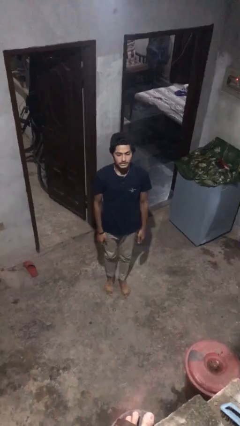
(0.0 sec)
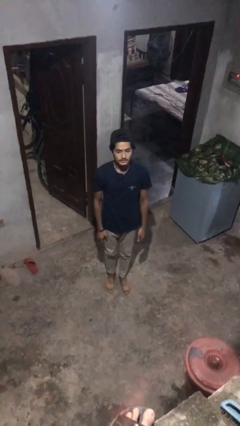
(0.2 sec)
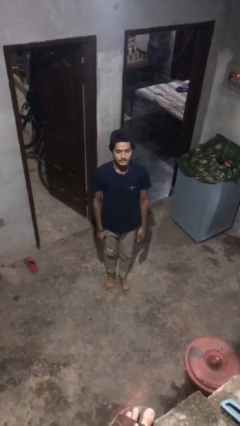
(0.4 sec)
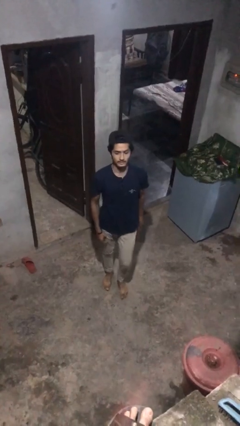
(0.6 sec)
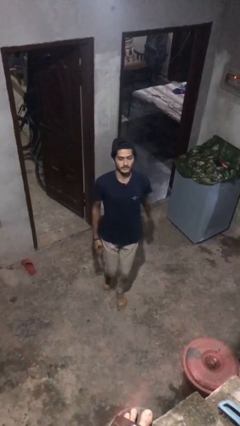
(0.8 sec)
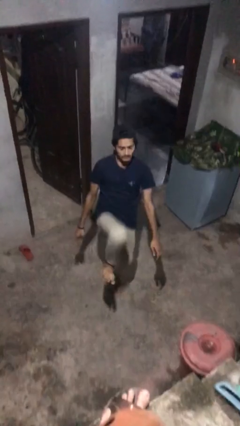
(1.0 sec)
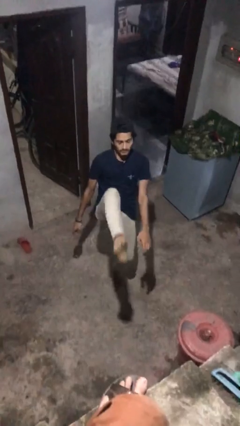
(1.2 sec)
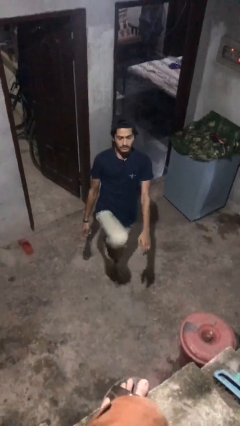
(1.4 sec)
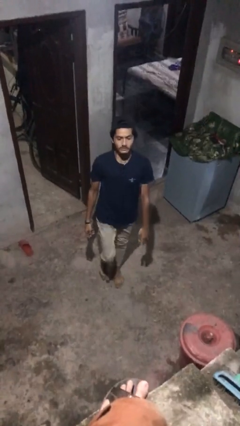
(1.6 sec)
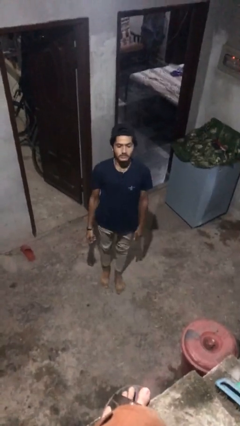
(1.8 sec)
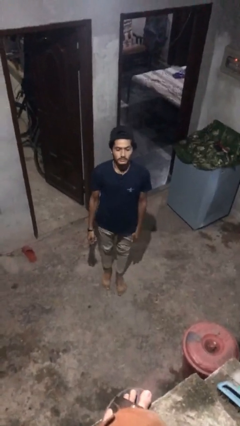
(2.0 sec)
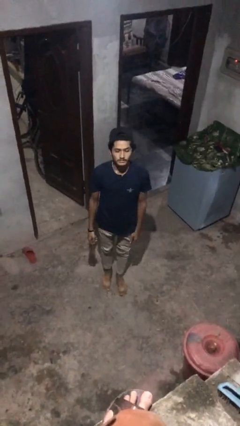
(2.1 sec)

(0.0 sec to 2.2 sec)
person karate kicks

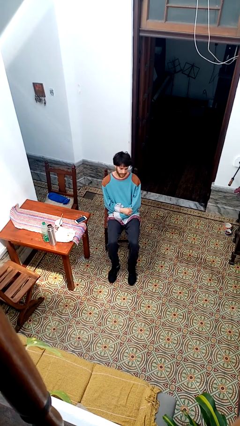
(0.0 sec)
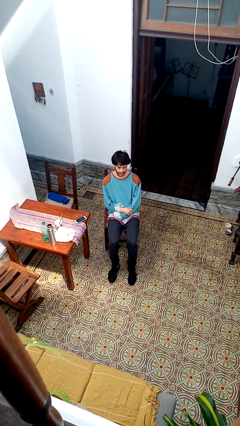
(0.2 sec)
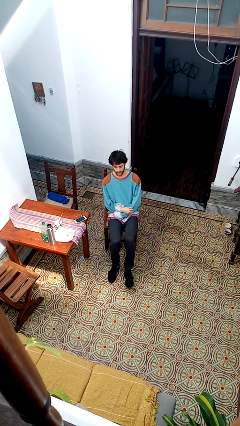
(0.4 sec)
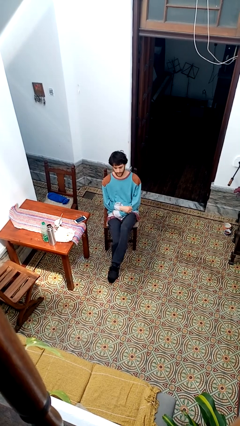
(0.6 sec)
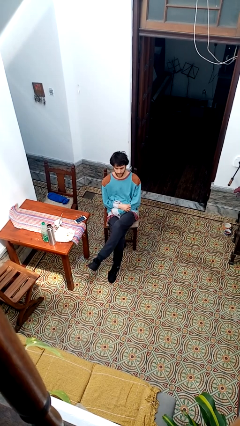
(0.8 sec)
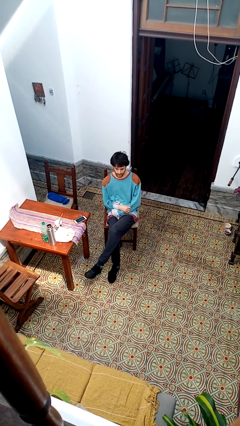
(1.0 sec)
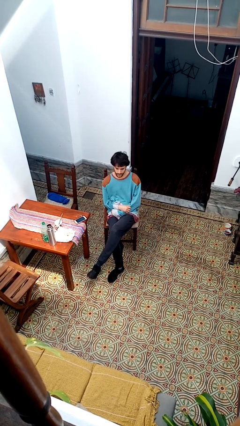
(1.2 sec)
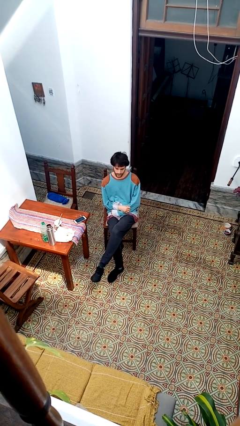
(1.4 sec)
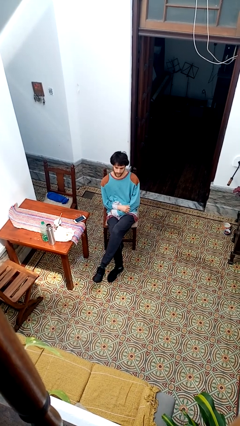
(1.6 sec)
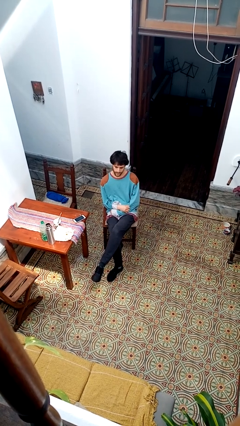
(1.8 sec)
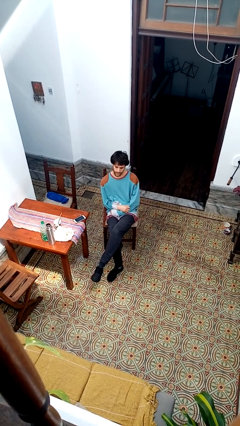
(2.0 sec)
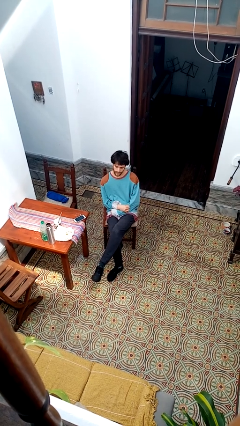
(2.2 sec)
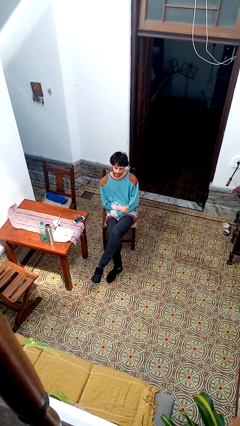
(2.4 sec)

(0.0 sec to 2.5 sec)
person crosses legs

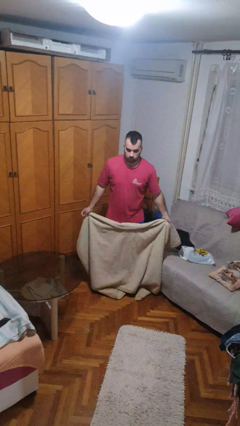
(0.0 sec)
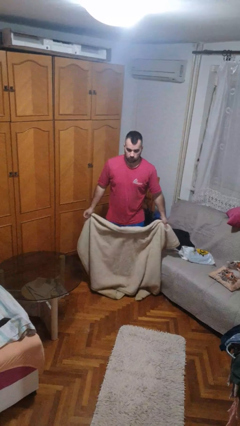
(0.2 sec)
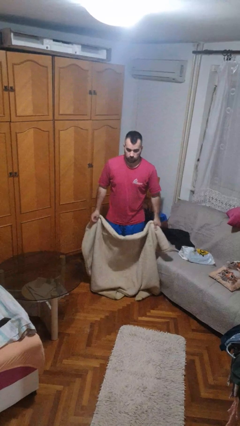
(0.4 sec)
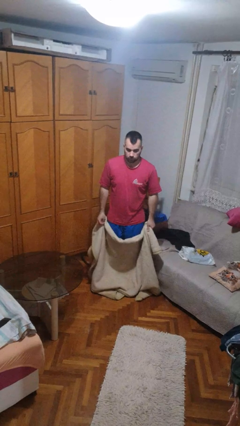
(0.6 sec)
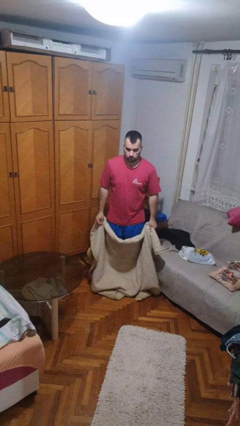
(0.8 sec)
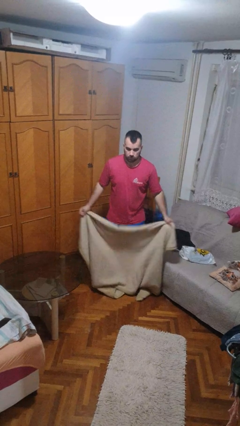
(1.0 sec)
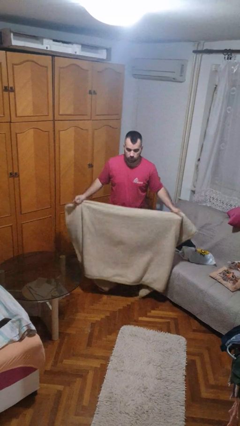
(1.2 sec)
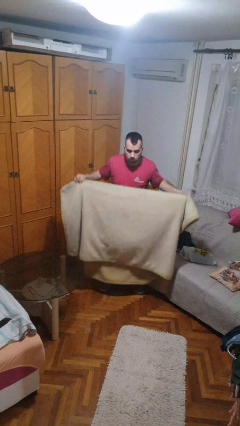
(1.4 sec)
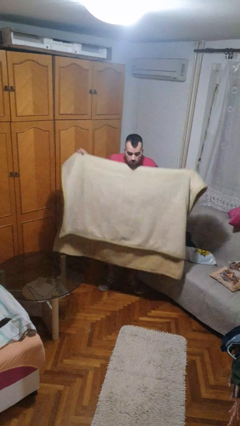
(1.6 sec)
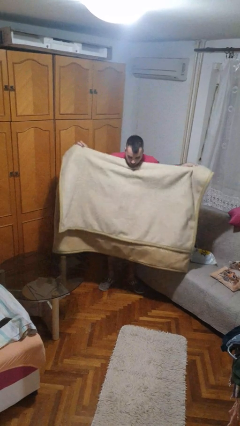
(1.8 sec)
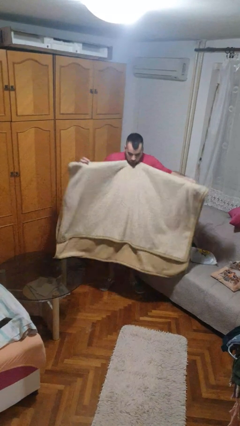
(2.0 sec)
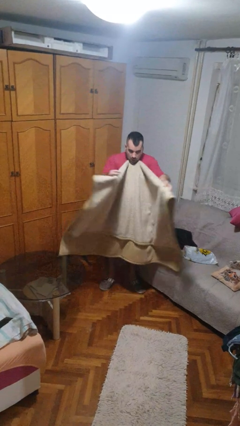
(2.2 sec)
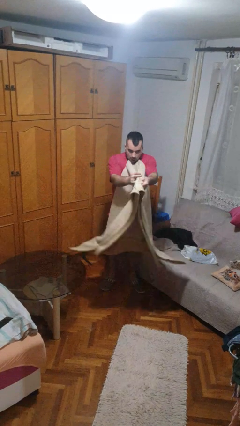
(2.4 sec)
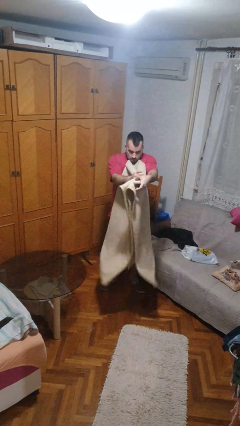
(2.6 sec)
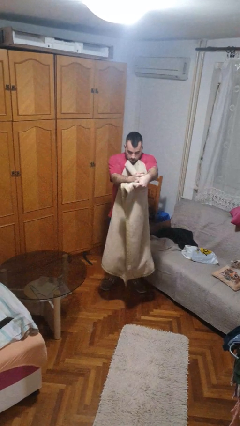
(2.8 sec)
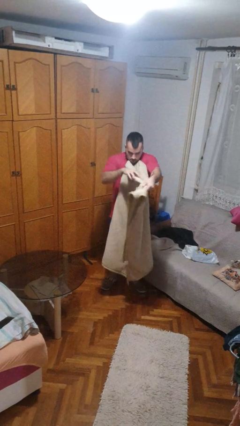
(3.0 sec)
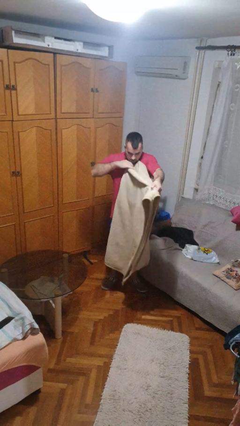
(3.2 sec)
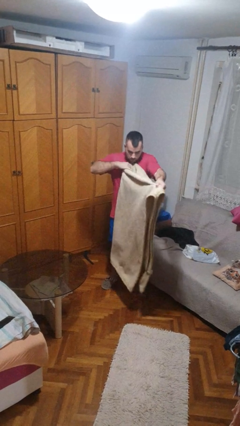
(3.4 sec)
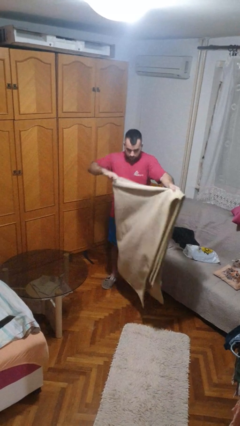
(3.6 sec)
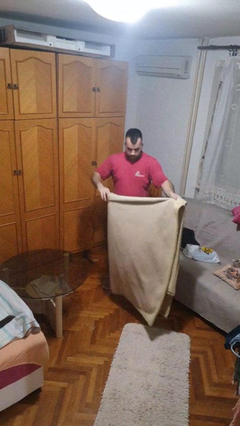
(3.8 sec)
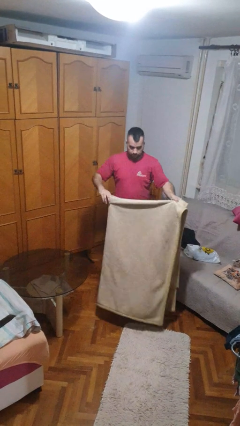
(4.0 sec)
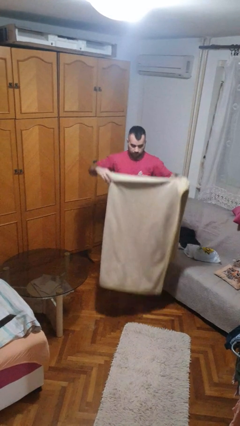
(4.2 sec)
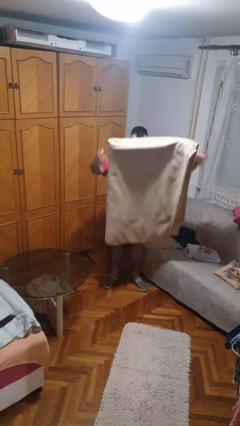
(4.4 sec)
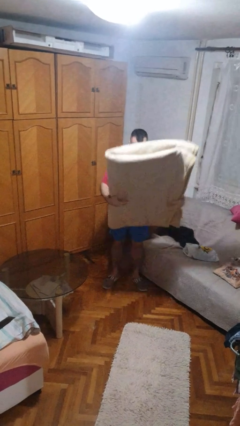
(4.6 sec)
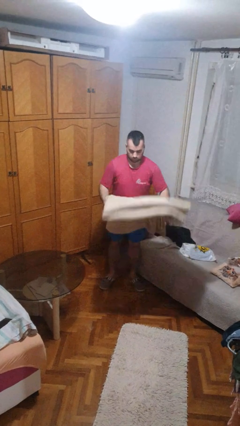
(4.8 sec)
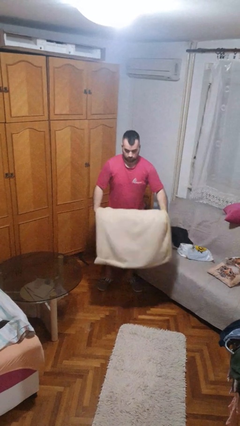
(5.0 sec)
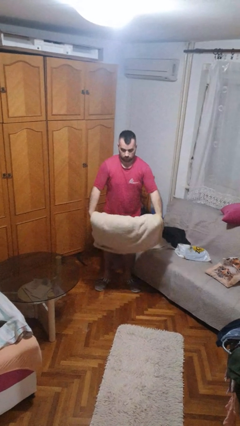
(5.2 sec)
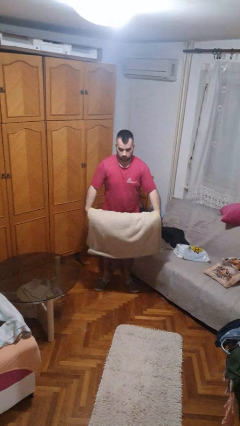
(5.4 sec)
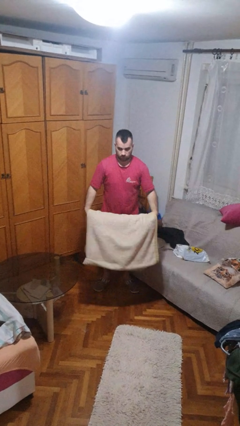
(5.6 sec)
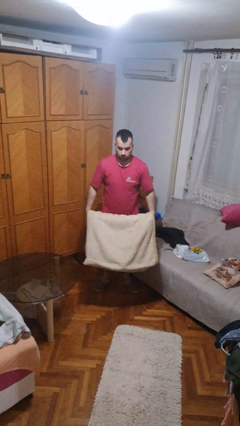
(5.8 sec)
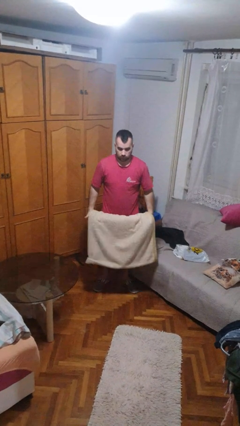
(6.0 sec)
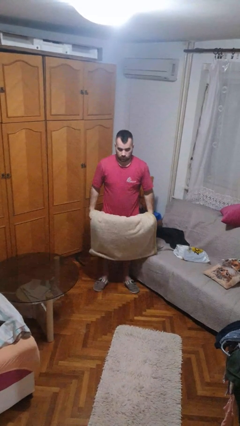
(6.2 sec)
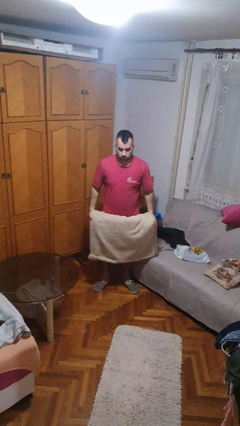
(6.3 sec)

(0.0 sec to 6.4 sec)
person folds blanket

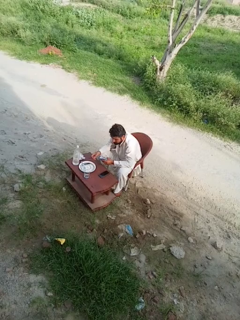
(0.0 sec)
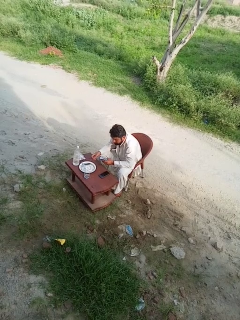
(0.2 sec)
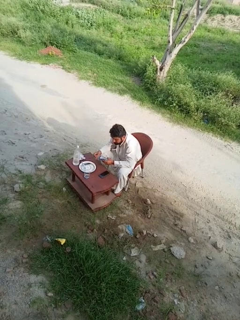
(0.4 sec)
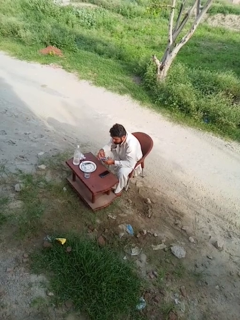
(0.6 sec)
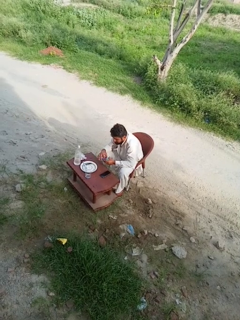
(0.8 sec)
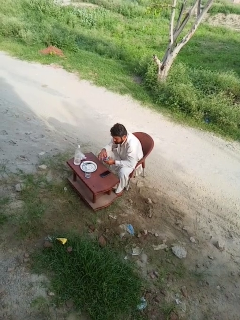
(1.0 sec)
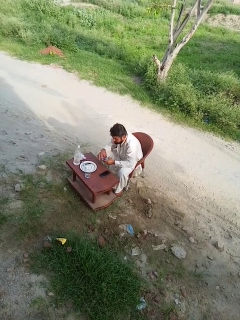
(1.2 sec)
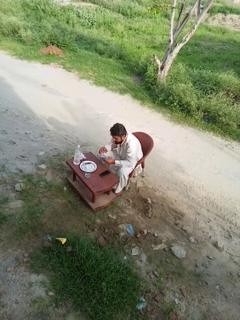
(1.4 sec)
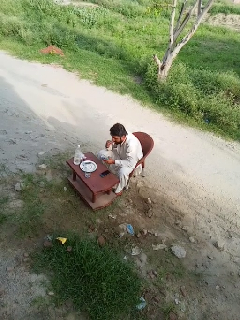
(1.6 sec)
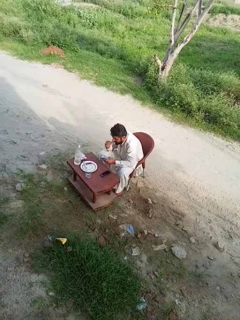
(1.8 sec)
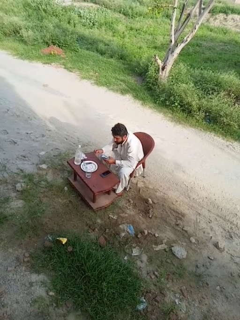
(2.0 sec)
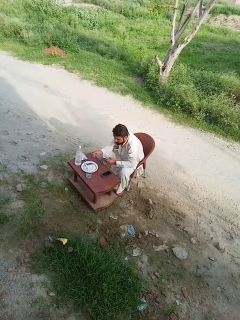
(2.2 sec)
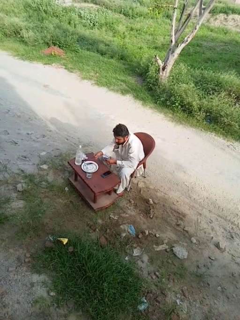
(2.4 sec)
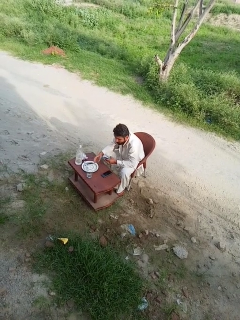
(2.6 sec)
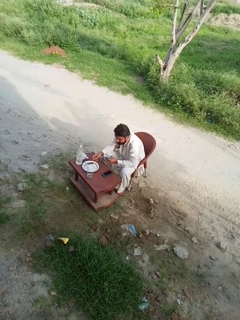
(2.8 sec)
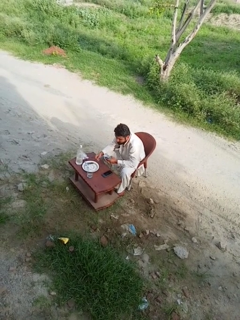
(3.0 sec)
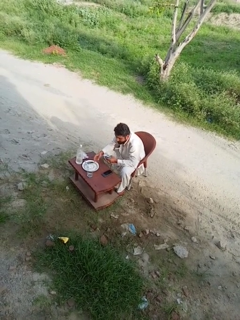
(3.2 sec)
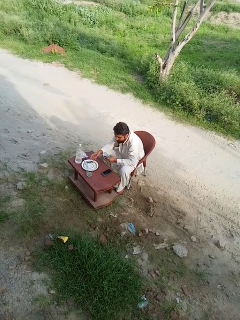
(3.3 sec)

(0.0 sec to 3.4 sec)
person eats with hands

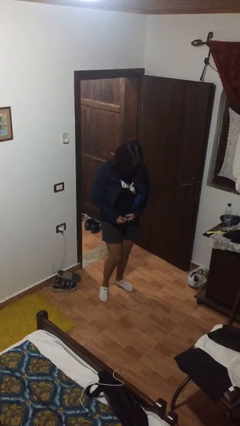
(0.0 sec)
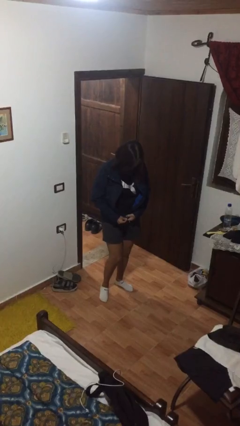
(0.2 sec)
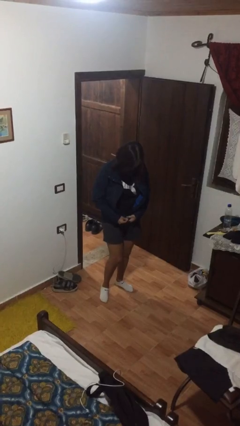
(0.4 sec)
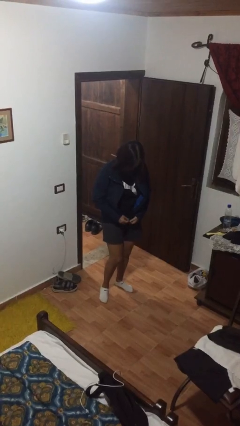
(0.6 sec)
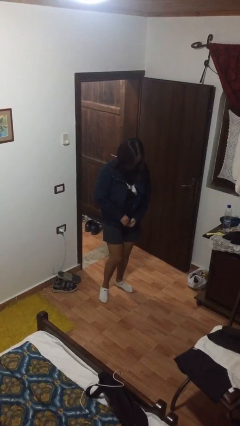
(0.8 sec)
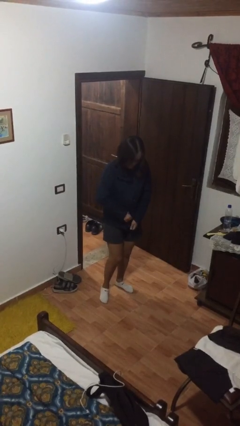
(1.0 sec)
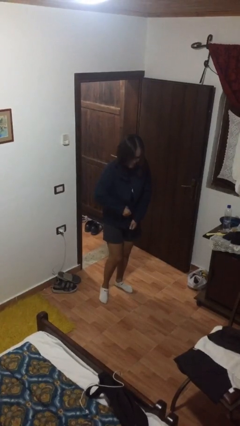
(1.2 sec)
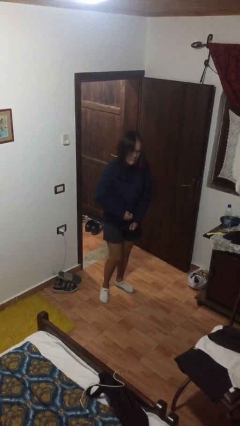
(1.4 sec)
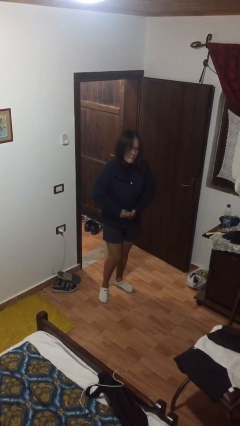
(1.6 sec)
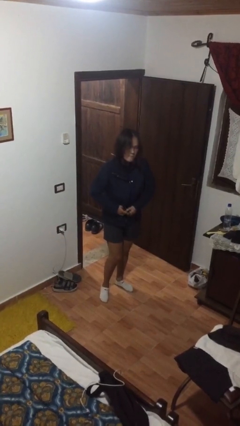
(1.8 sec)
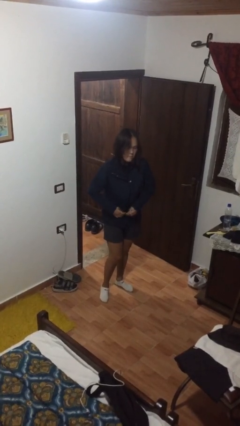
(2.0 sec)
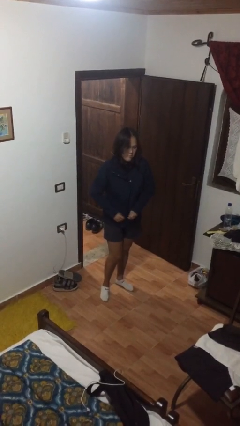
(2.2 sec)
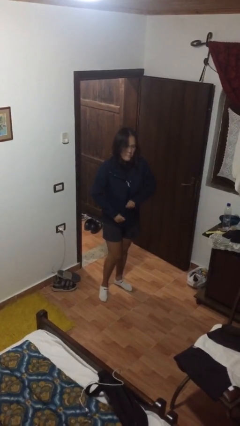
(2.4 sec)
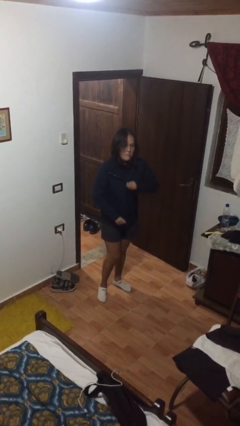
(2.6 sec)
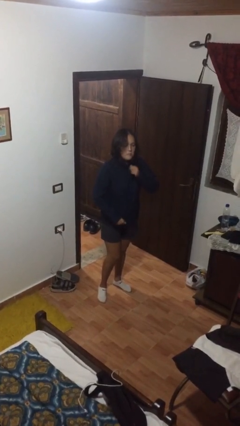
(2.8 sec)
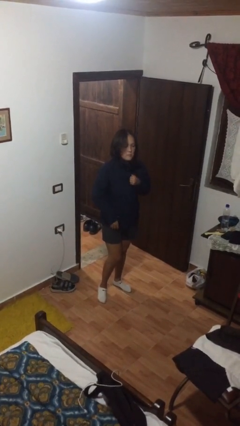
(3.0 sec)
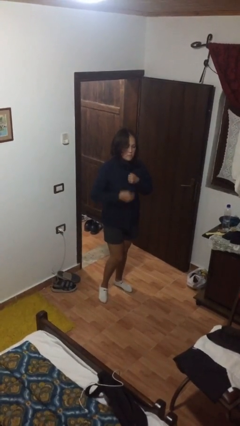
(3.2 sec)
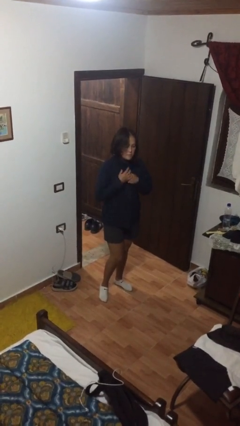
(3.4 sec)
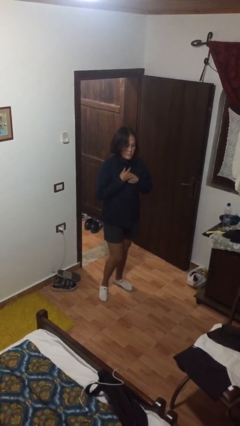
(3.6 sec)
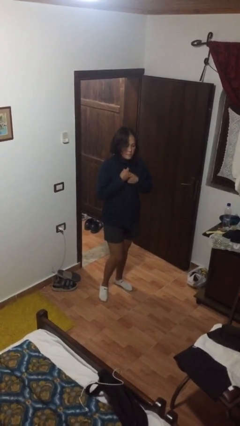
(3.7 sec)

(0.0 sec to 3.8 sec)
person zips up jacket
